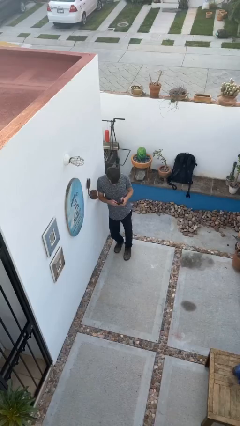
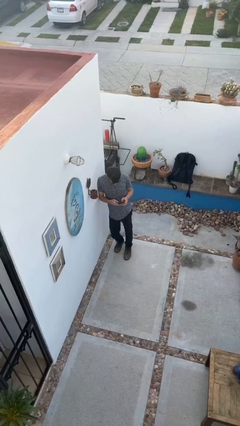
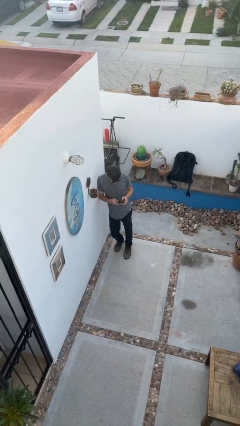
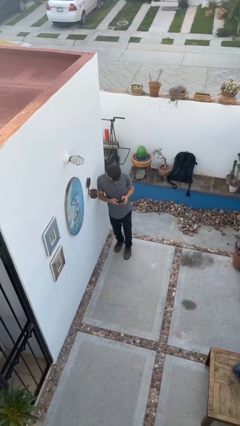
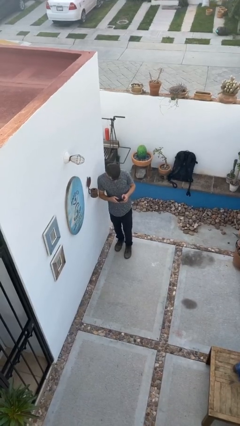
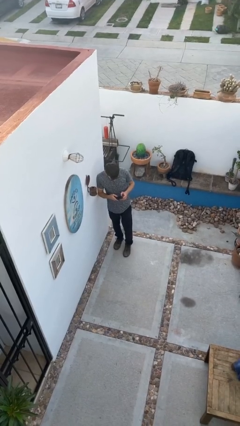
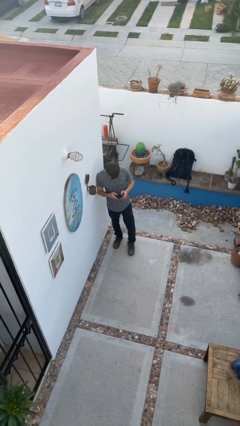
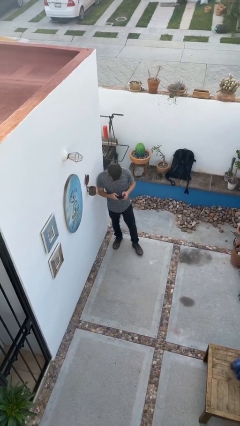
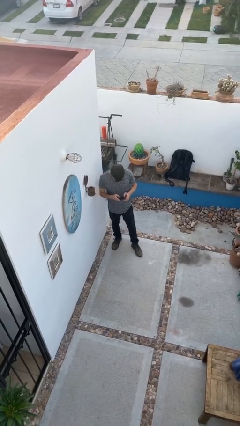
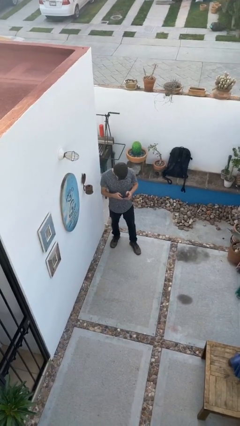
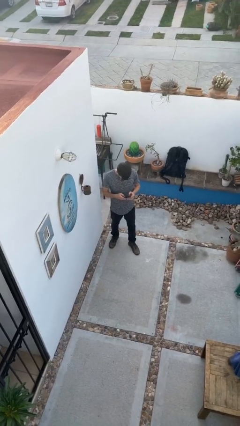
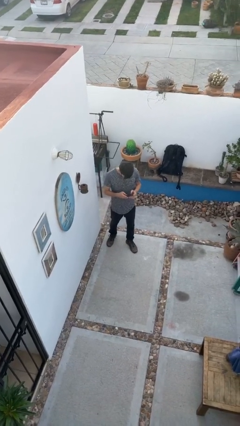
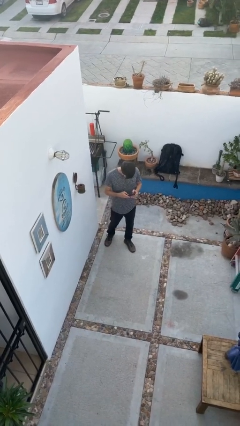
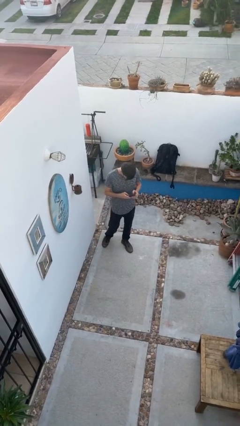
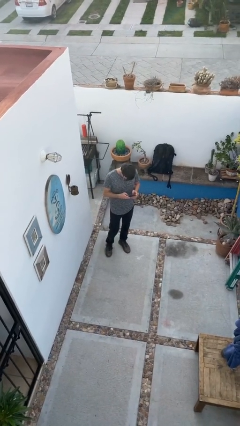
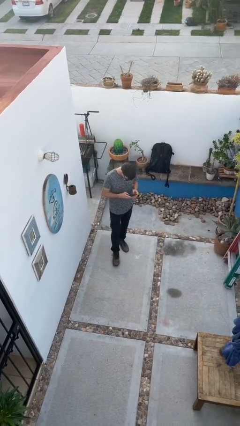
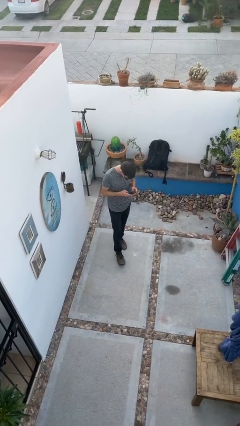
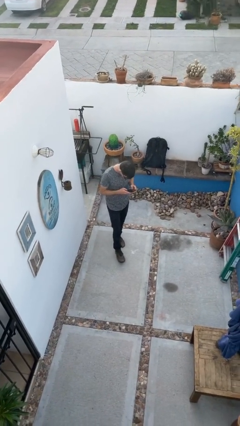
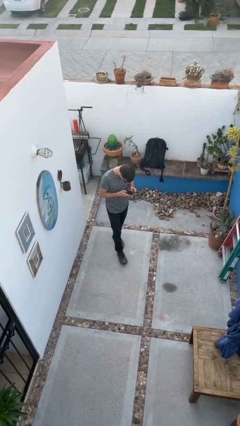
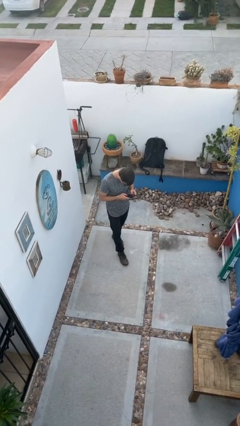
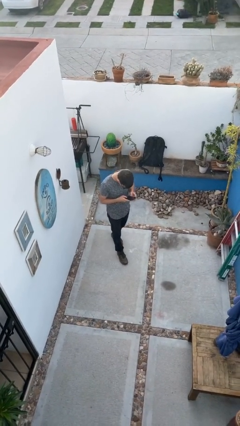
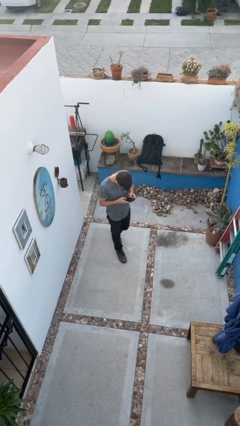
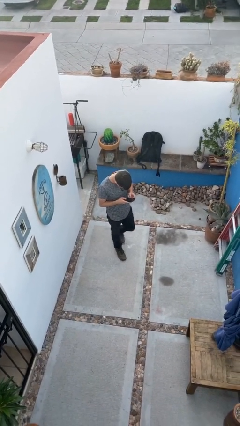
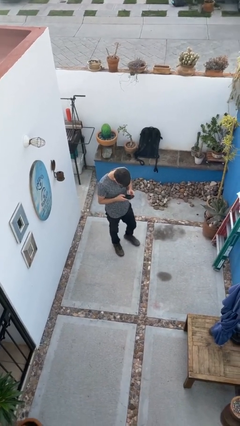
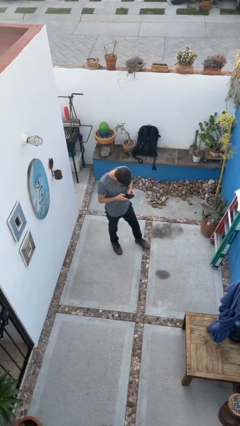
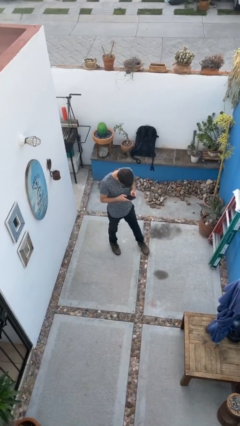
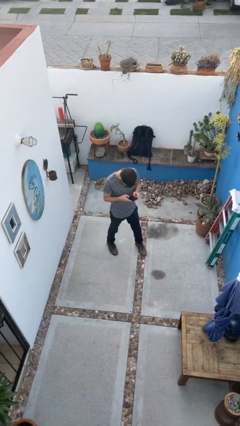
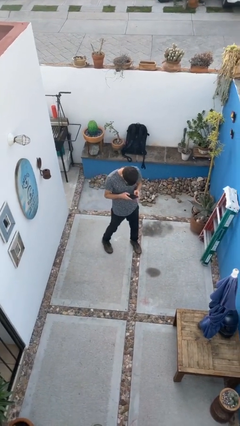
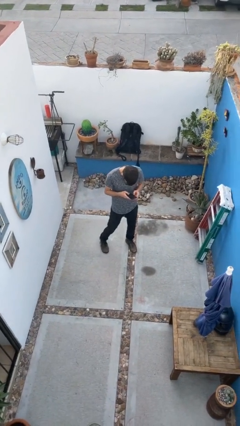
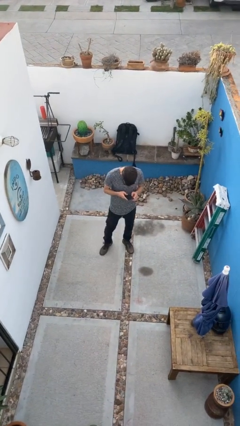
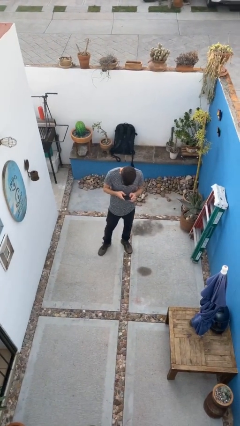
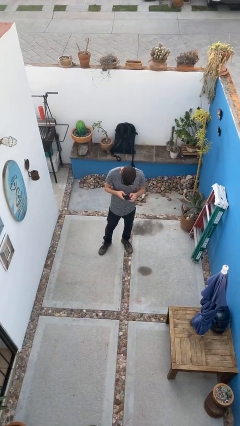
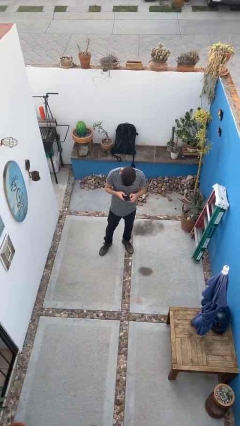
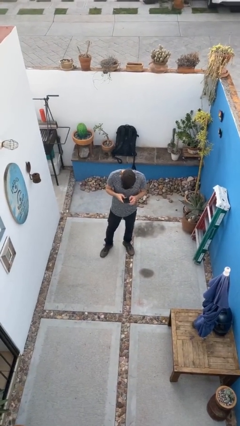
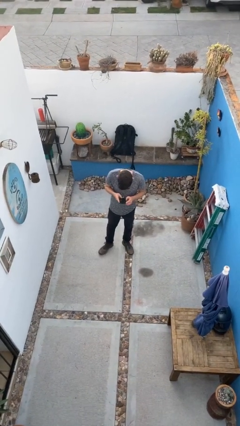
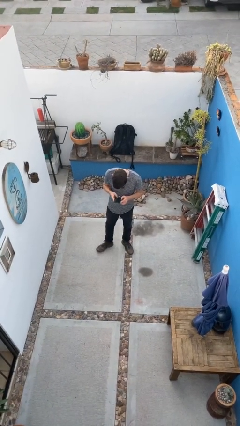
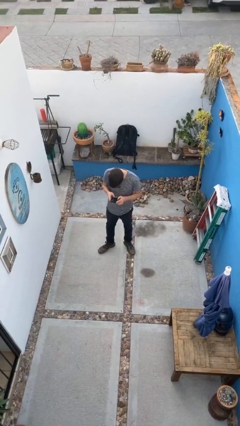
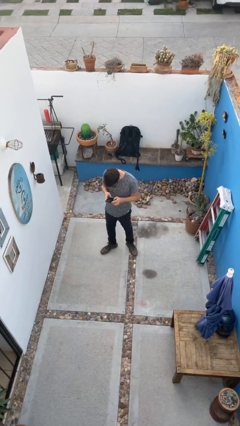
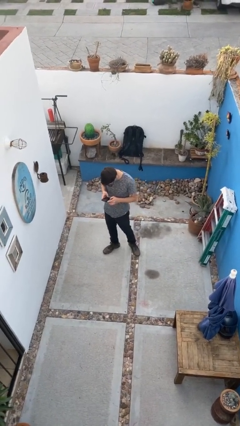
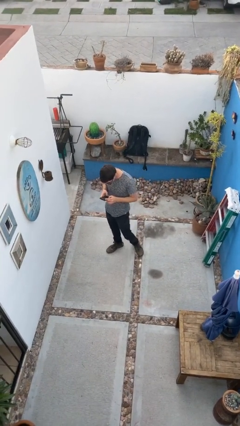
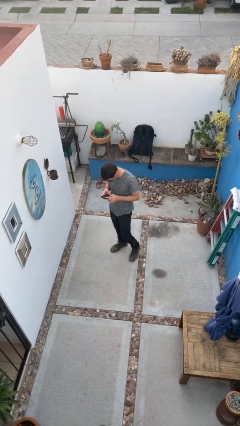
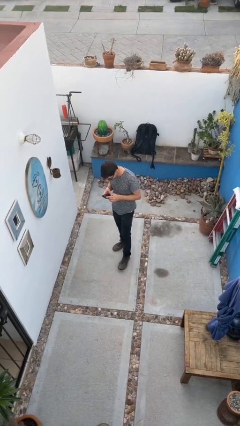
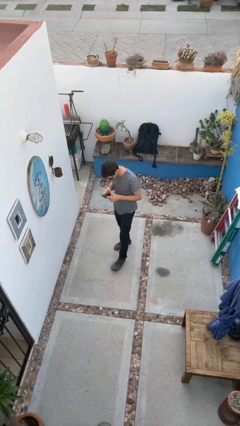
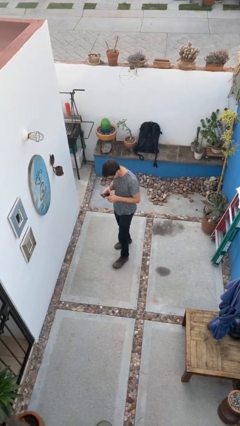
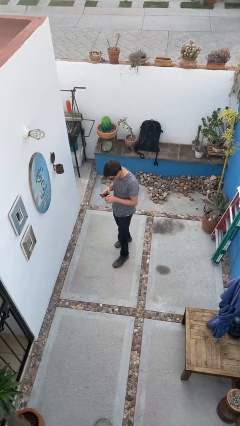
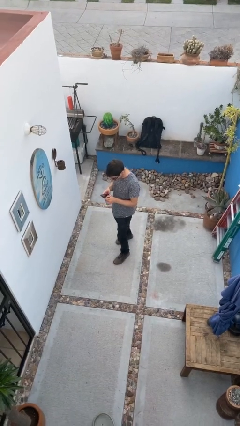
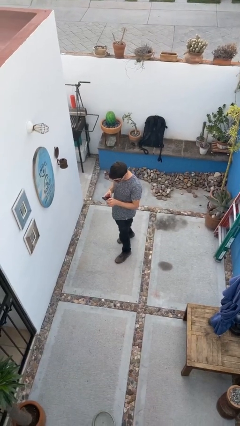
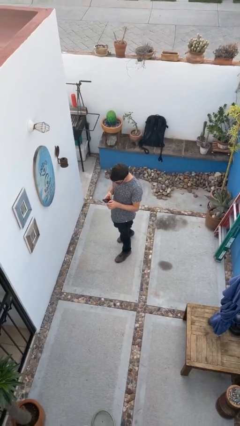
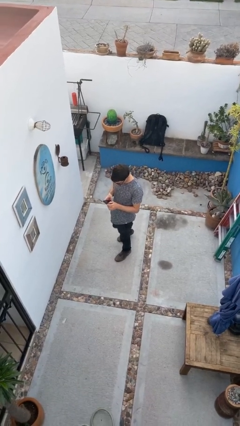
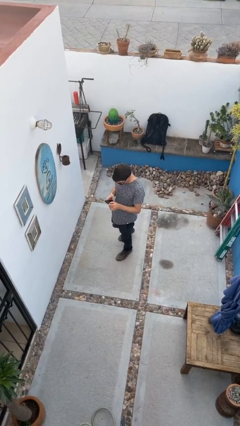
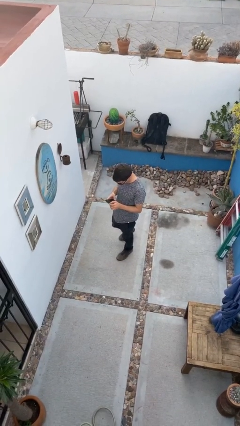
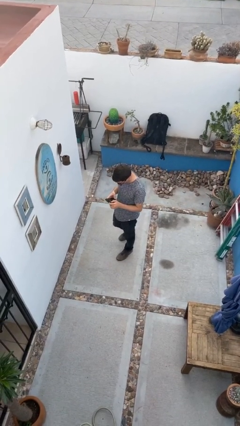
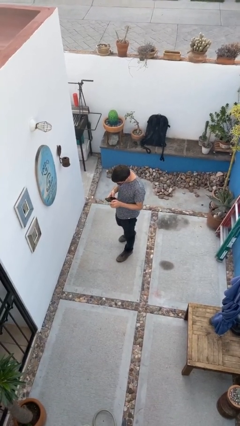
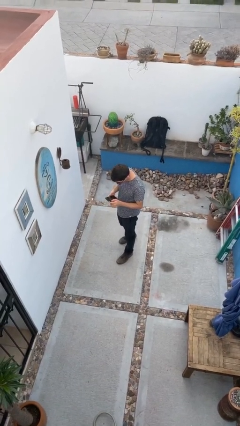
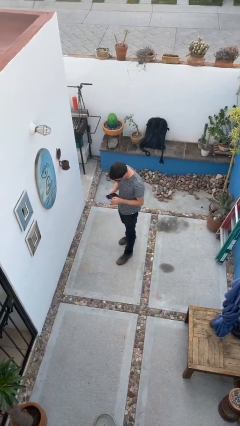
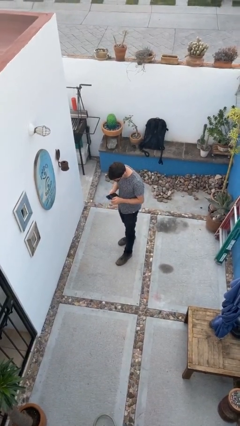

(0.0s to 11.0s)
person texts on phone

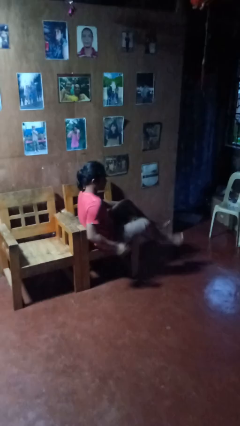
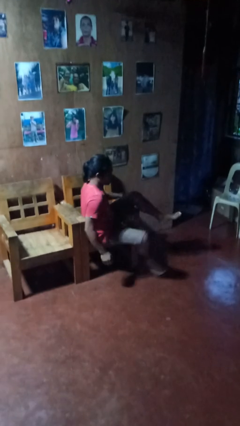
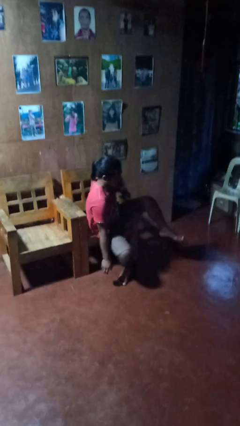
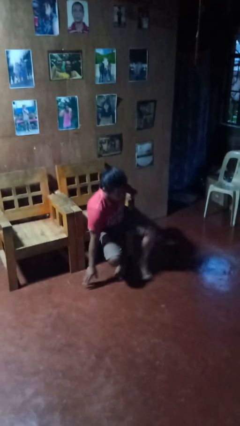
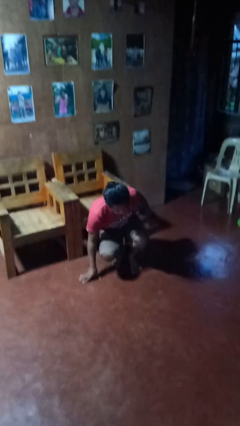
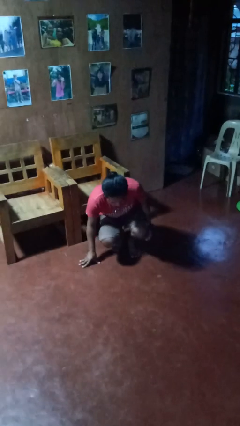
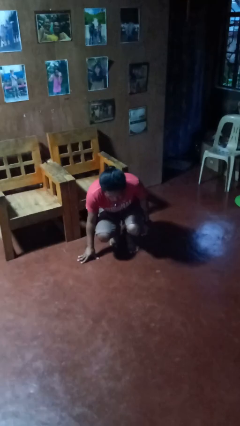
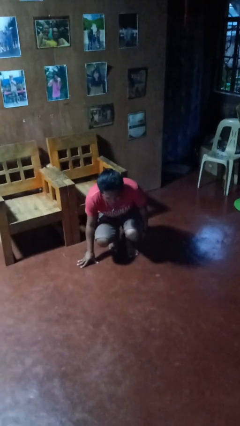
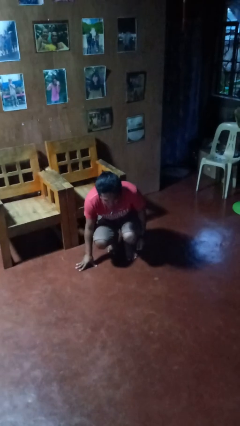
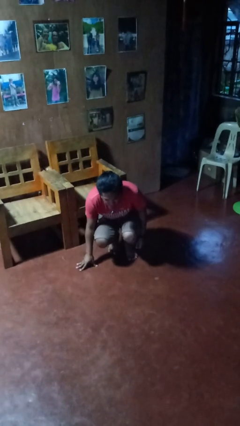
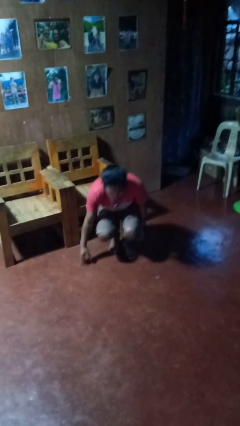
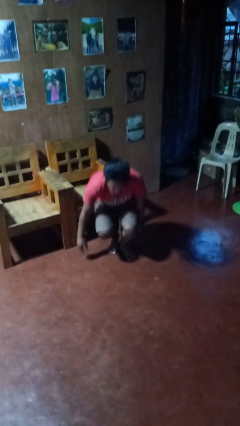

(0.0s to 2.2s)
person falls from chair

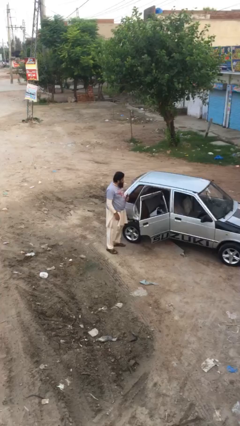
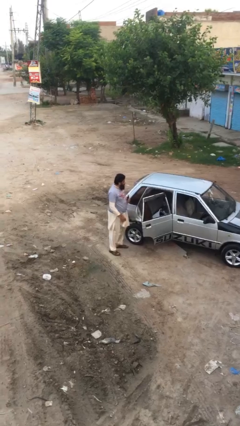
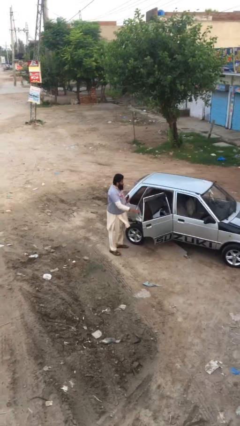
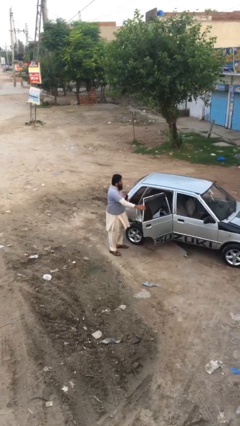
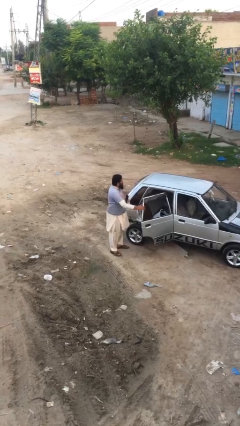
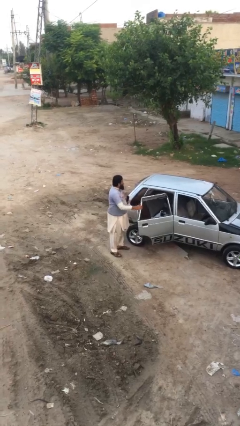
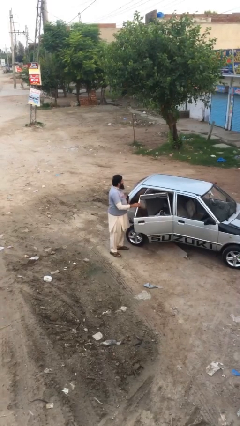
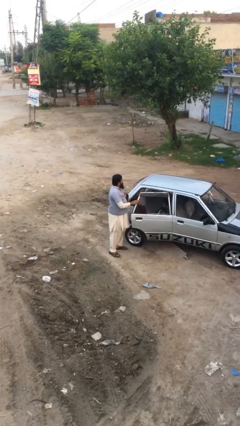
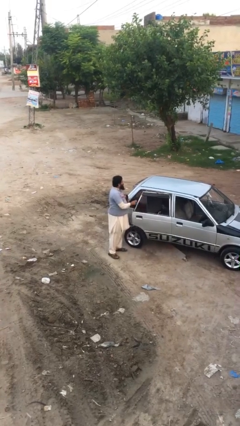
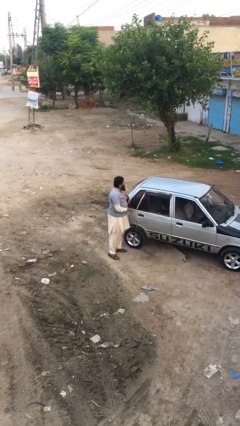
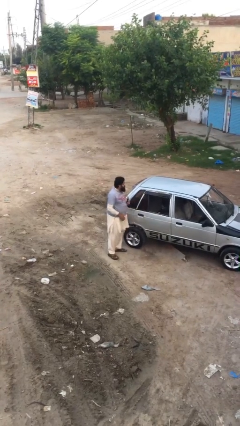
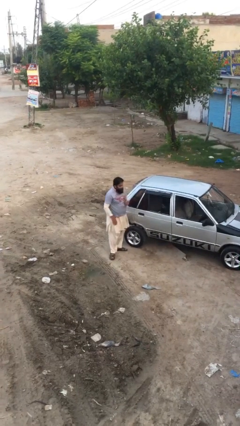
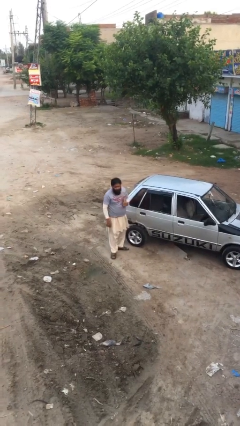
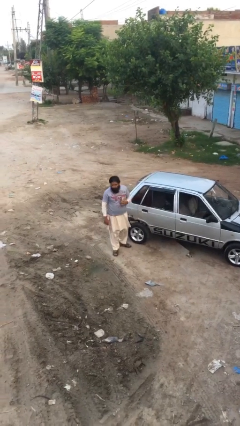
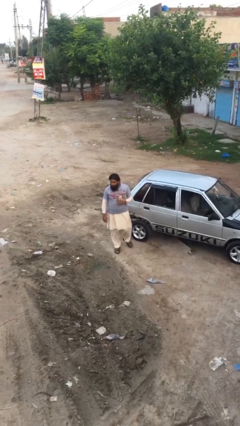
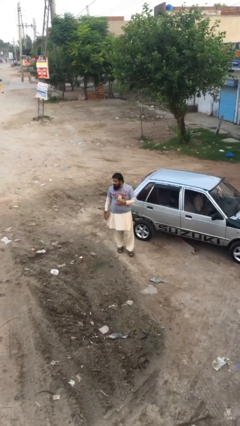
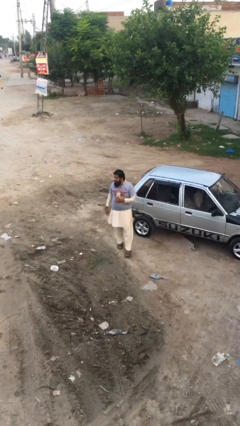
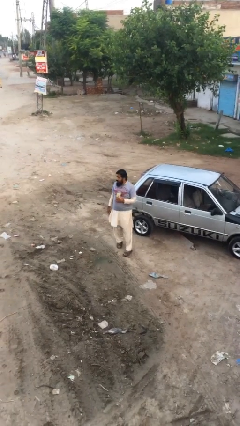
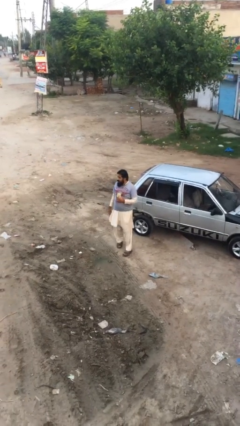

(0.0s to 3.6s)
person closes car door

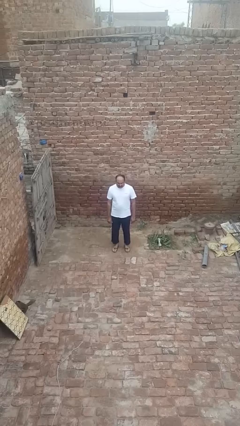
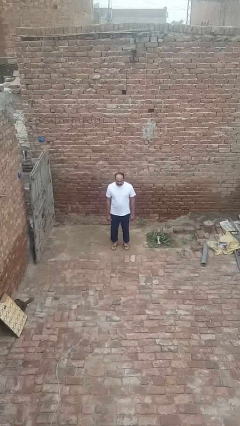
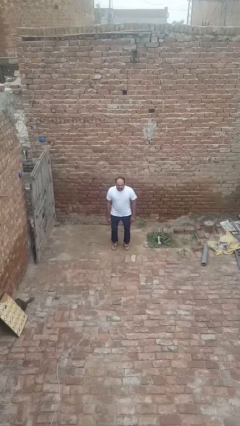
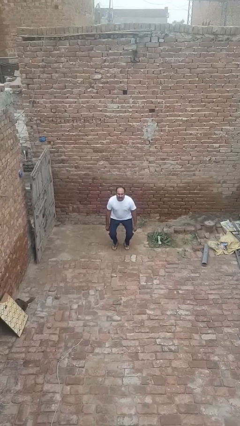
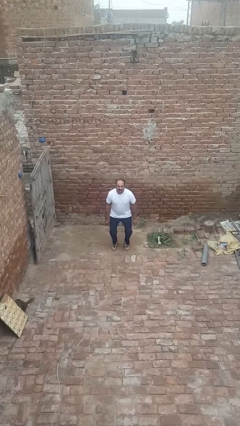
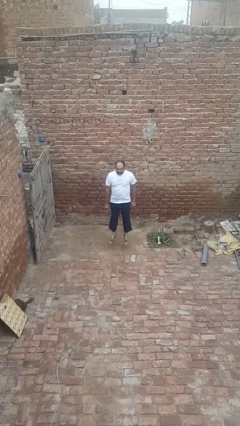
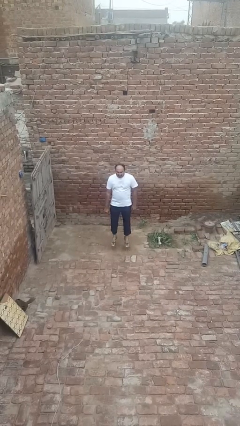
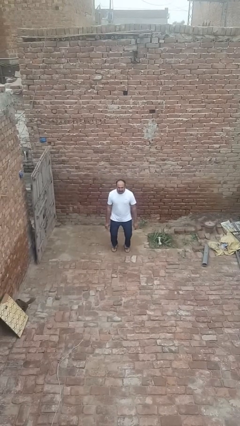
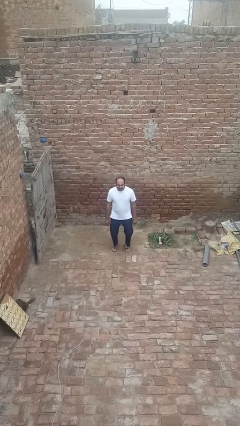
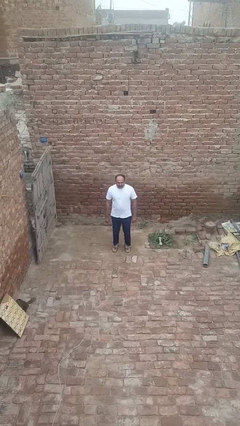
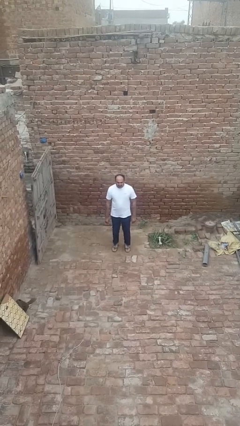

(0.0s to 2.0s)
person jumps
